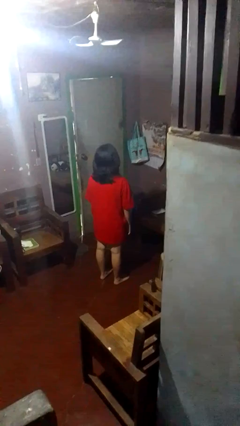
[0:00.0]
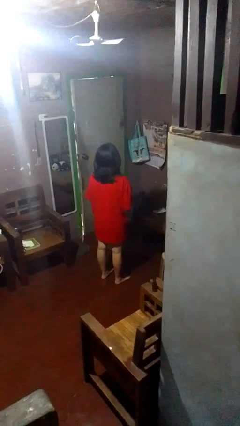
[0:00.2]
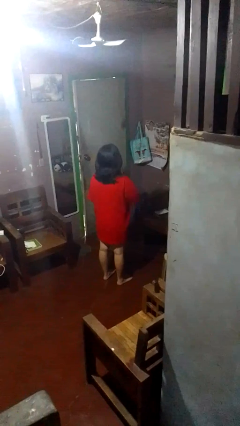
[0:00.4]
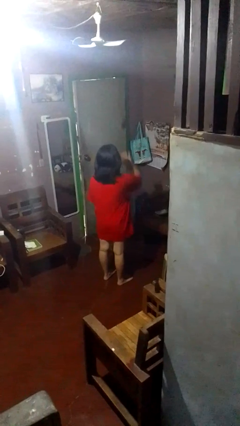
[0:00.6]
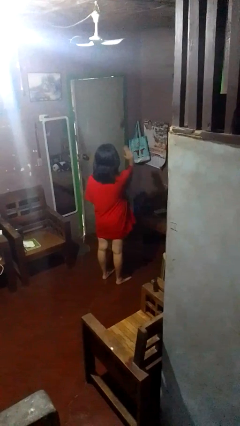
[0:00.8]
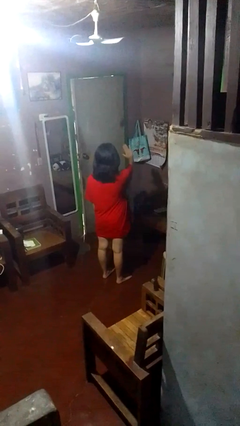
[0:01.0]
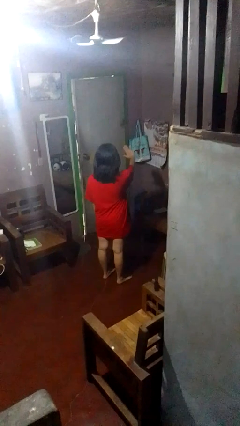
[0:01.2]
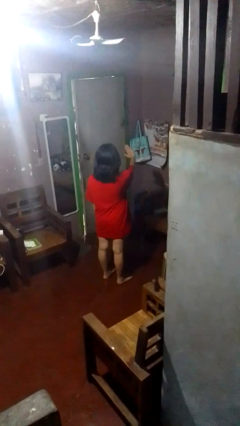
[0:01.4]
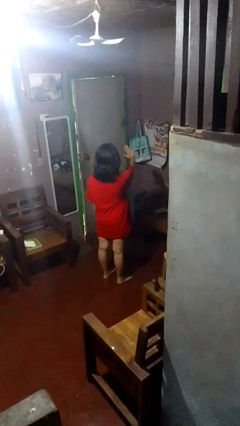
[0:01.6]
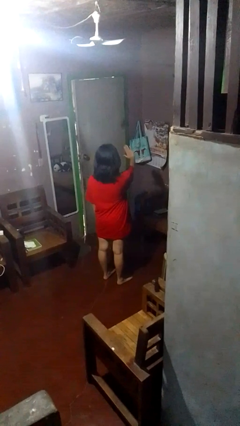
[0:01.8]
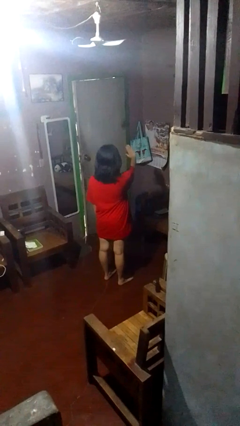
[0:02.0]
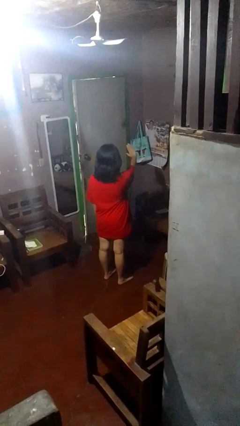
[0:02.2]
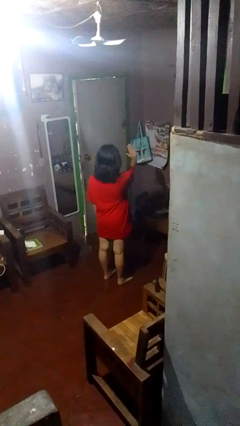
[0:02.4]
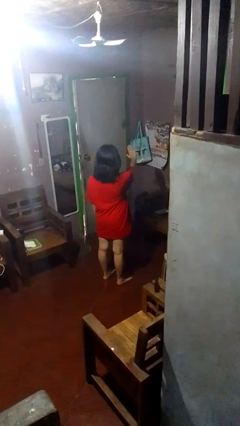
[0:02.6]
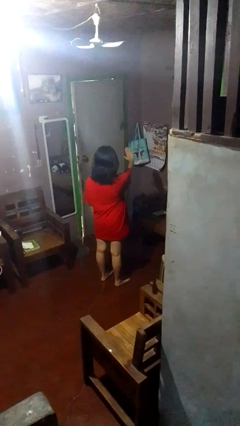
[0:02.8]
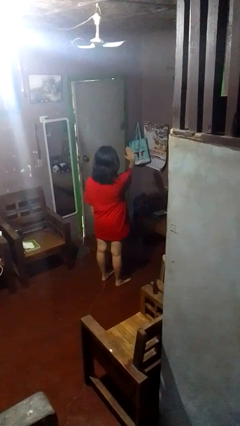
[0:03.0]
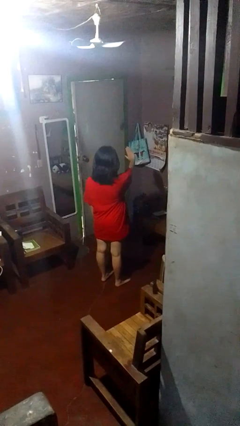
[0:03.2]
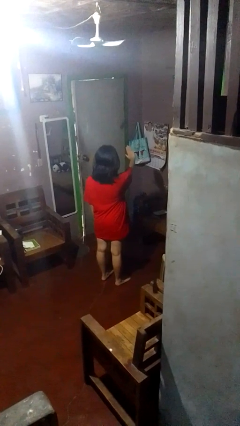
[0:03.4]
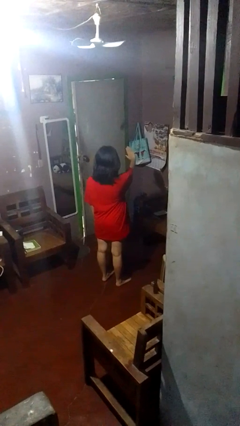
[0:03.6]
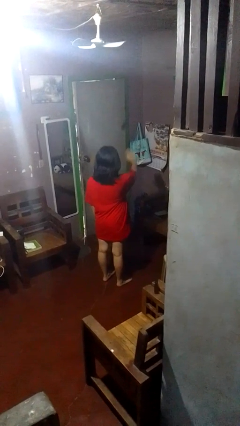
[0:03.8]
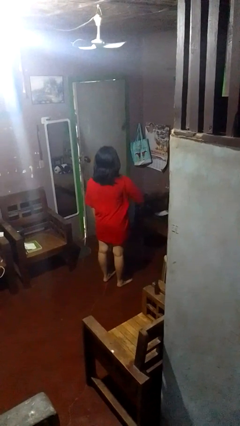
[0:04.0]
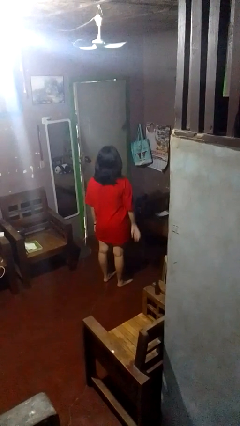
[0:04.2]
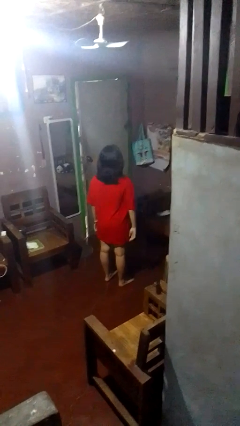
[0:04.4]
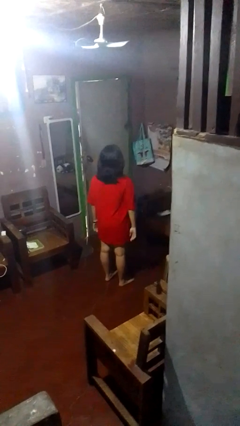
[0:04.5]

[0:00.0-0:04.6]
person gestures stop

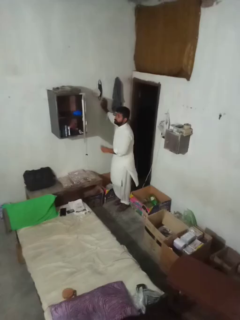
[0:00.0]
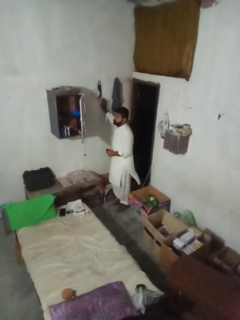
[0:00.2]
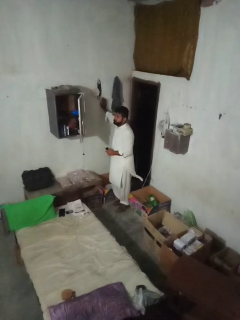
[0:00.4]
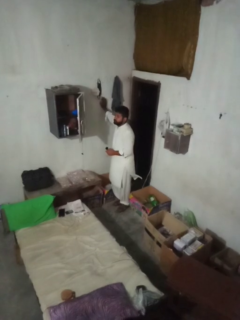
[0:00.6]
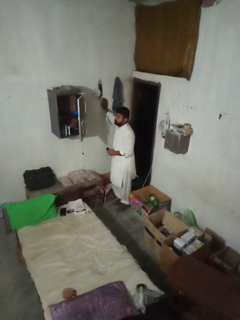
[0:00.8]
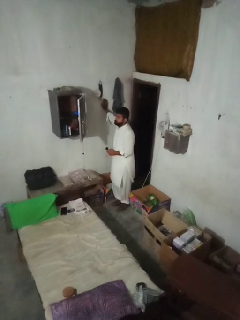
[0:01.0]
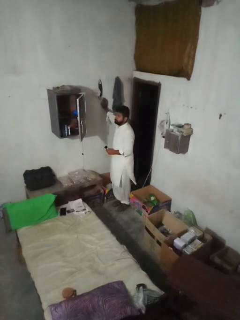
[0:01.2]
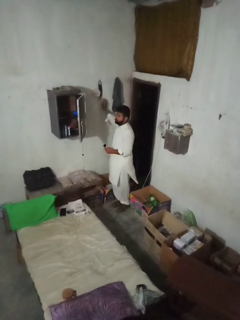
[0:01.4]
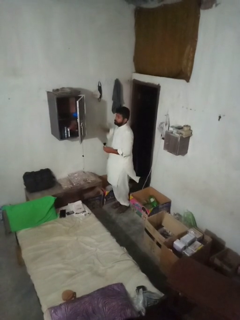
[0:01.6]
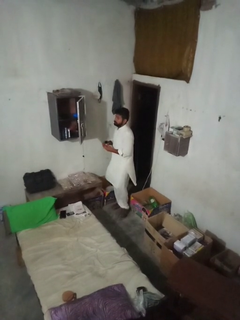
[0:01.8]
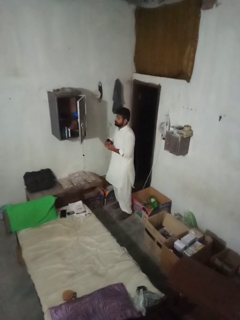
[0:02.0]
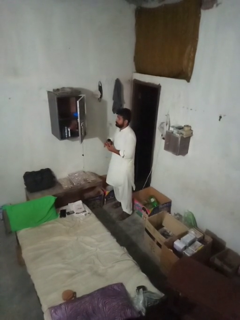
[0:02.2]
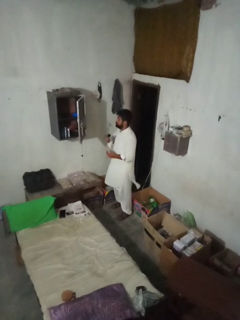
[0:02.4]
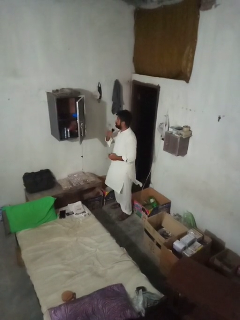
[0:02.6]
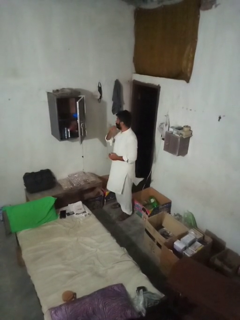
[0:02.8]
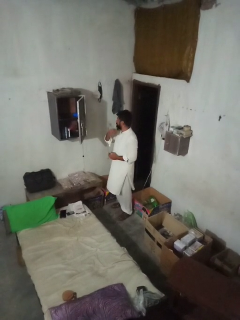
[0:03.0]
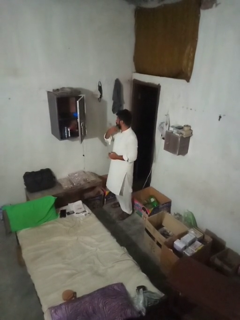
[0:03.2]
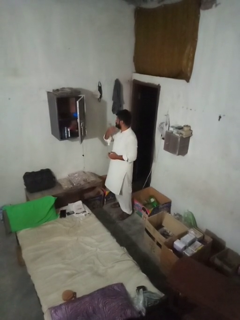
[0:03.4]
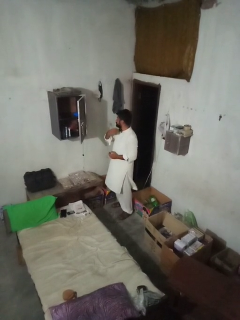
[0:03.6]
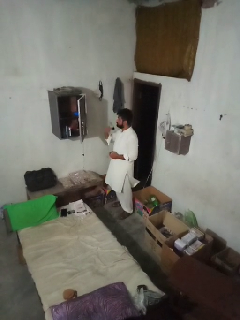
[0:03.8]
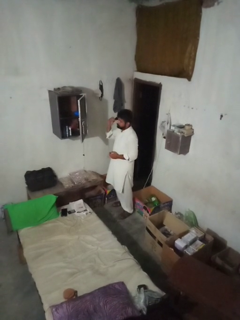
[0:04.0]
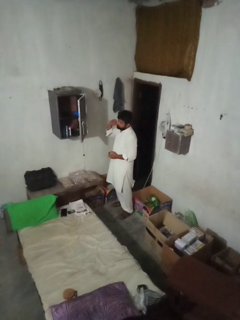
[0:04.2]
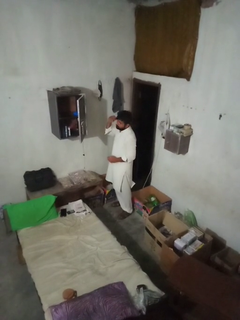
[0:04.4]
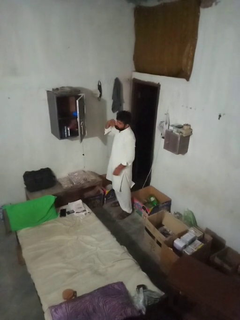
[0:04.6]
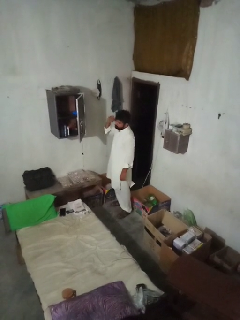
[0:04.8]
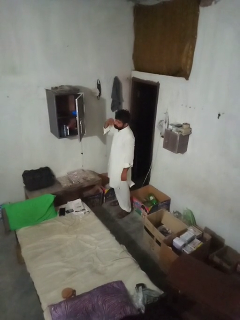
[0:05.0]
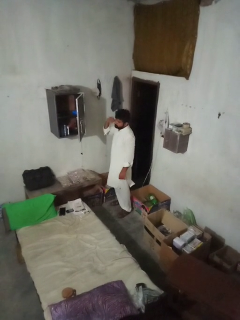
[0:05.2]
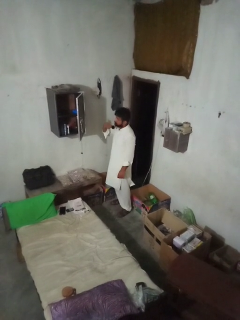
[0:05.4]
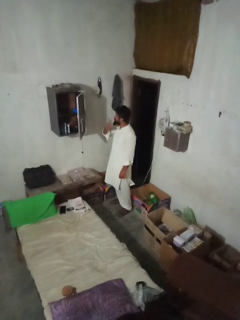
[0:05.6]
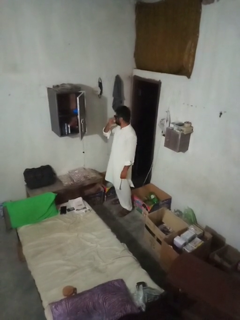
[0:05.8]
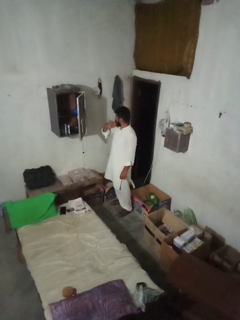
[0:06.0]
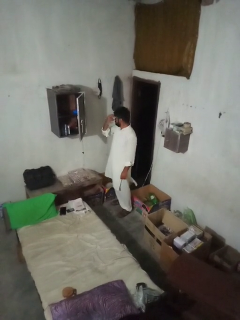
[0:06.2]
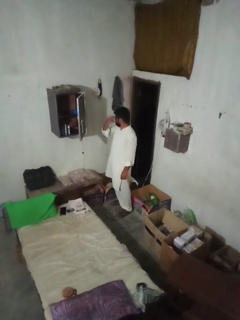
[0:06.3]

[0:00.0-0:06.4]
person applies foundation makeup

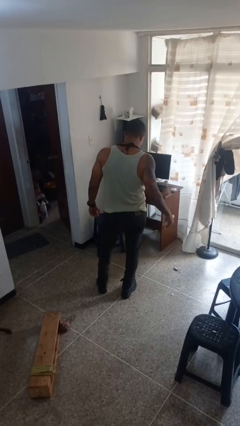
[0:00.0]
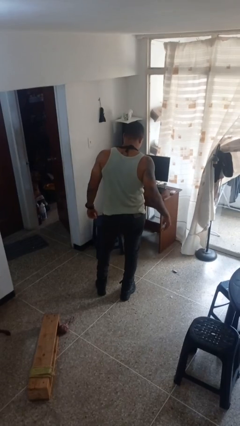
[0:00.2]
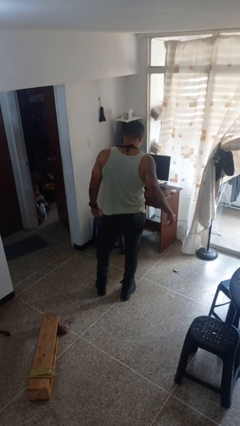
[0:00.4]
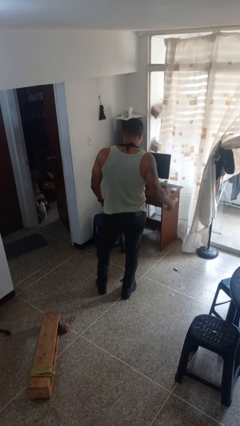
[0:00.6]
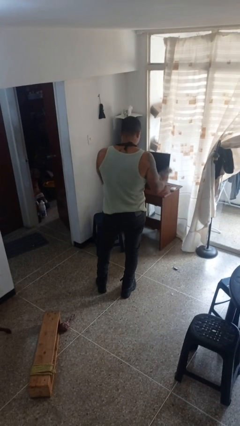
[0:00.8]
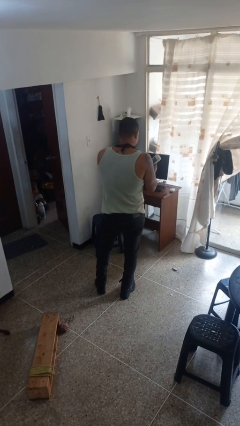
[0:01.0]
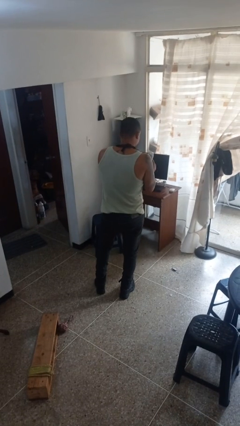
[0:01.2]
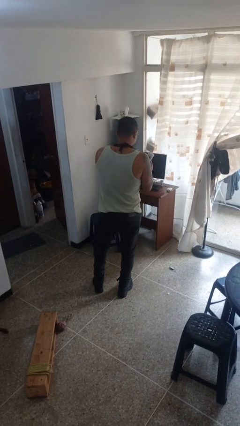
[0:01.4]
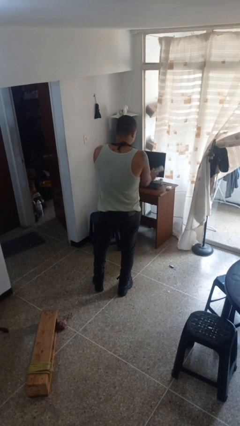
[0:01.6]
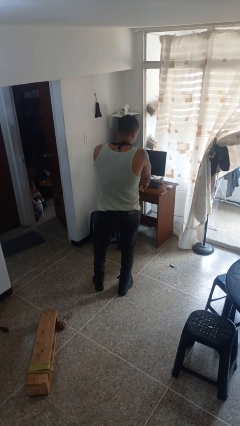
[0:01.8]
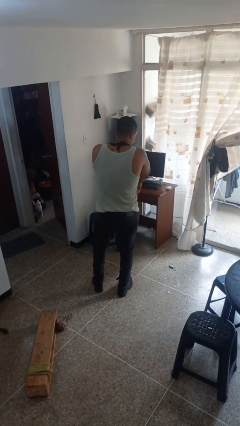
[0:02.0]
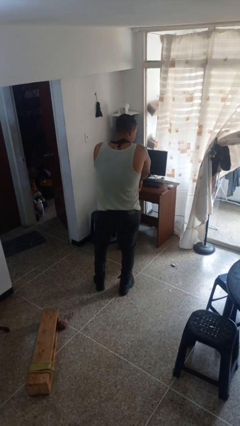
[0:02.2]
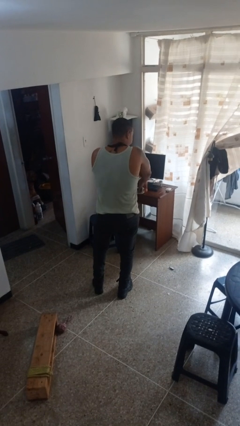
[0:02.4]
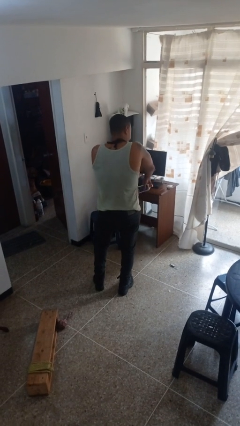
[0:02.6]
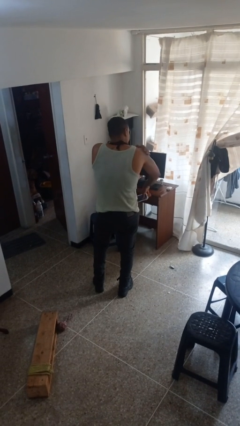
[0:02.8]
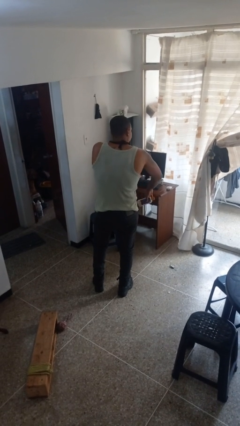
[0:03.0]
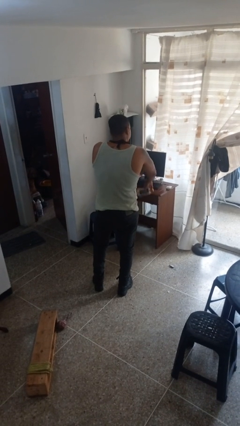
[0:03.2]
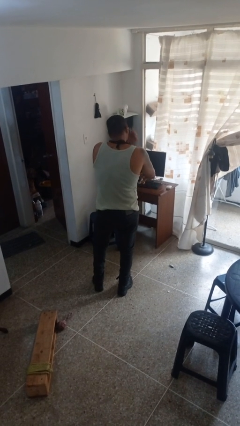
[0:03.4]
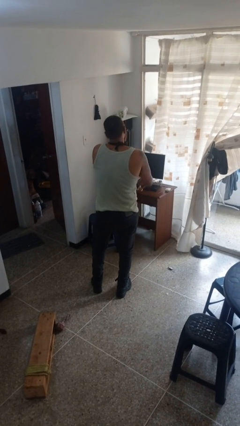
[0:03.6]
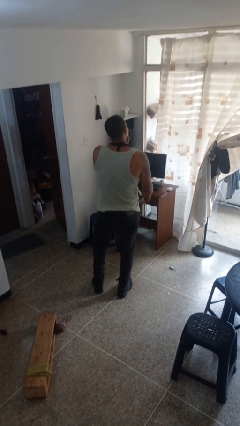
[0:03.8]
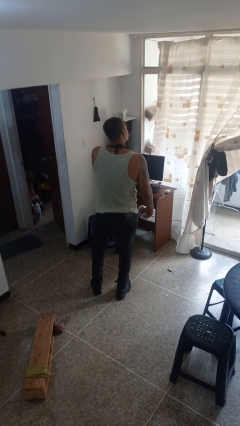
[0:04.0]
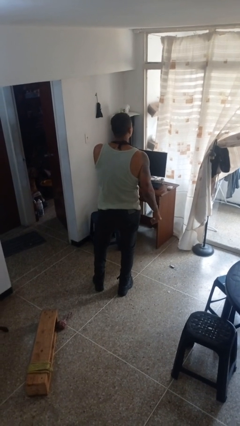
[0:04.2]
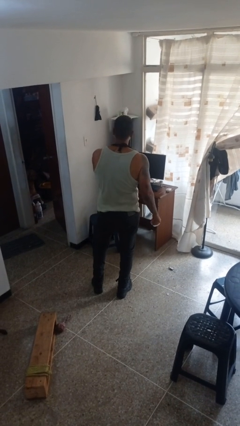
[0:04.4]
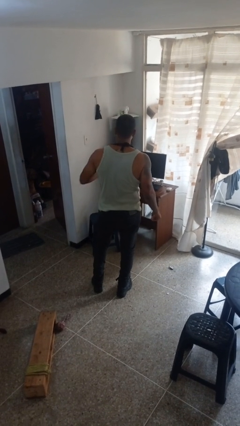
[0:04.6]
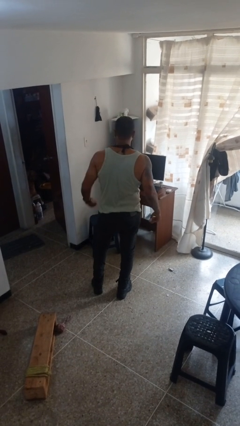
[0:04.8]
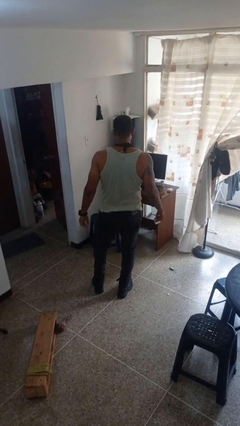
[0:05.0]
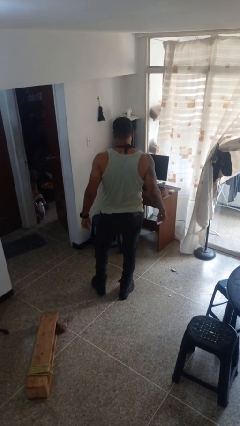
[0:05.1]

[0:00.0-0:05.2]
person applies sunscreen

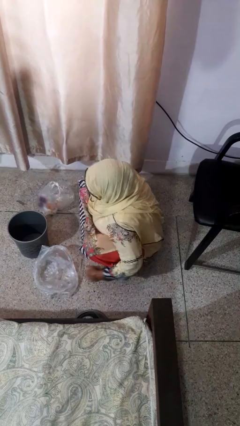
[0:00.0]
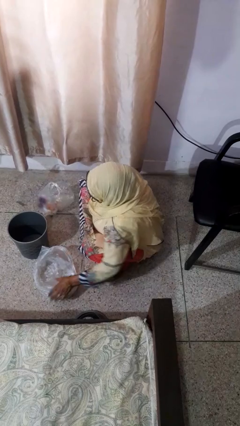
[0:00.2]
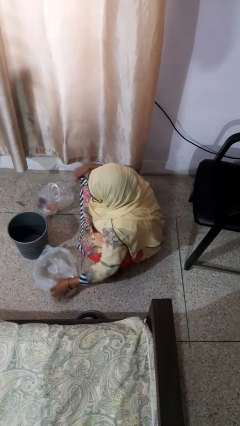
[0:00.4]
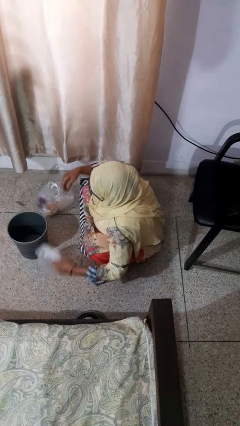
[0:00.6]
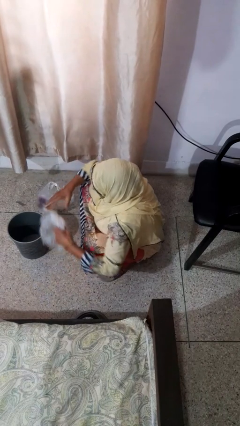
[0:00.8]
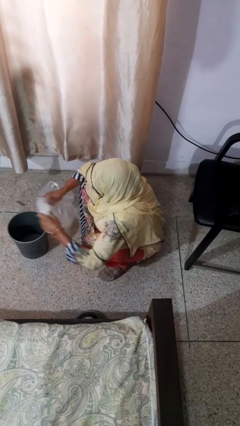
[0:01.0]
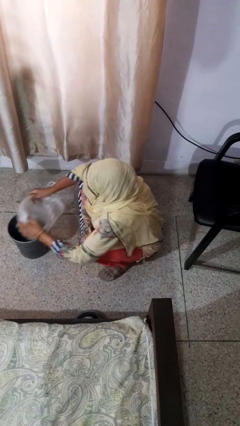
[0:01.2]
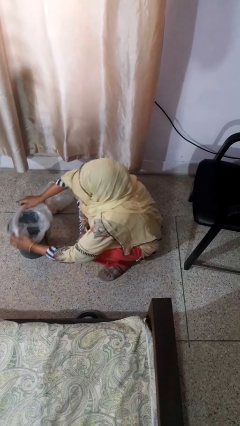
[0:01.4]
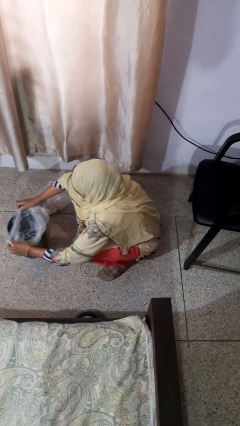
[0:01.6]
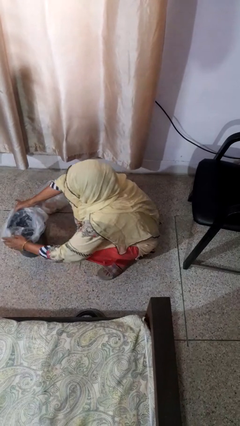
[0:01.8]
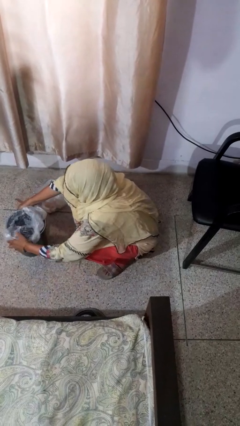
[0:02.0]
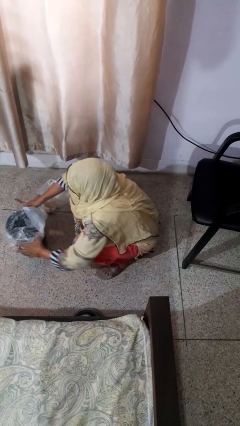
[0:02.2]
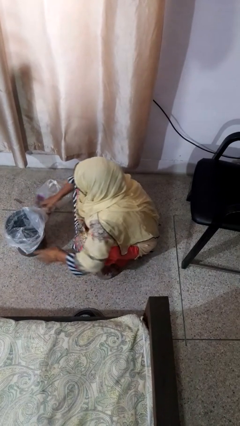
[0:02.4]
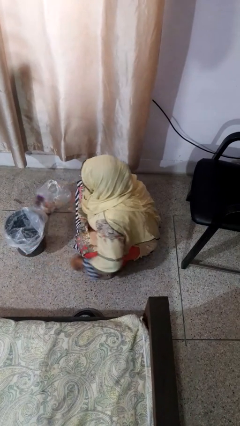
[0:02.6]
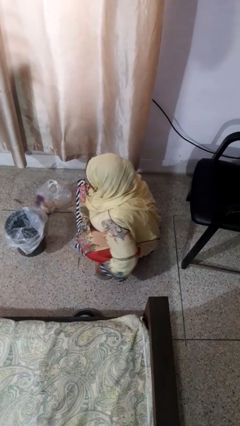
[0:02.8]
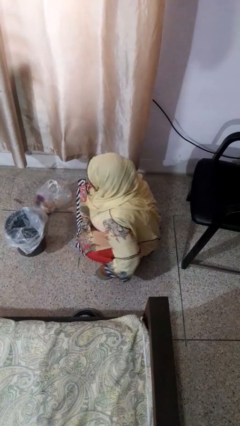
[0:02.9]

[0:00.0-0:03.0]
person inserts trashbag into trashcan
